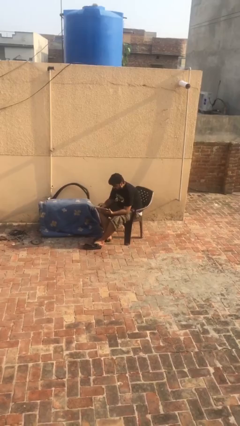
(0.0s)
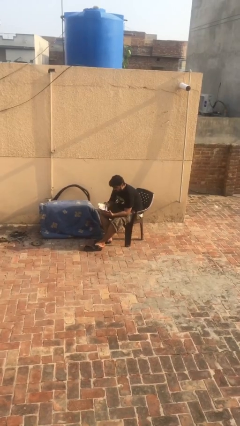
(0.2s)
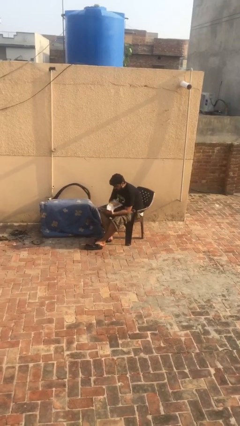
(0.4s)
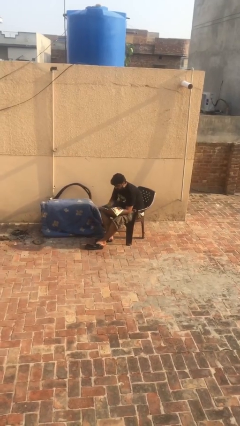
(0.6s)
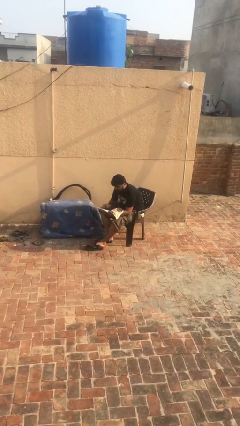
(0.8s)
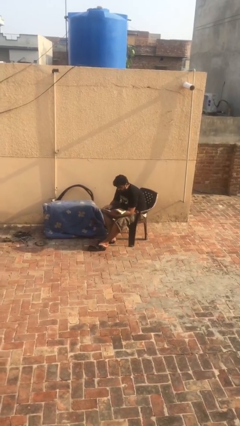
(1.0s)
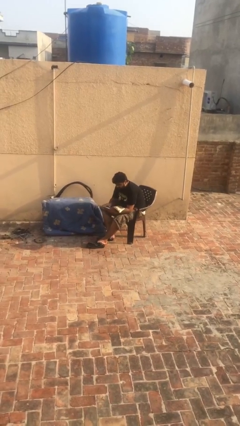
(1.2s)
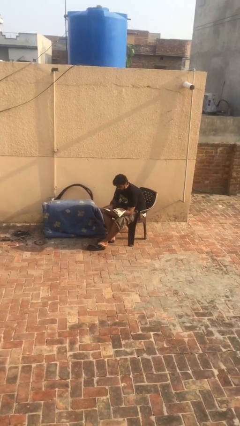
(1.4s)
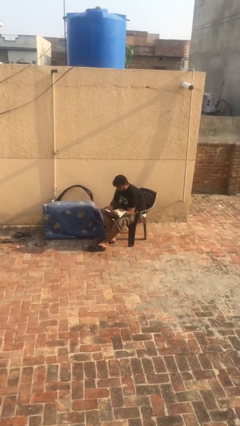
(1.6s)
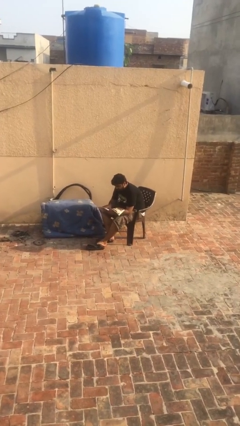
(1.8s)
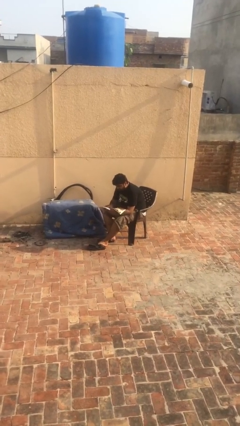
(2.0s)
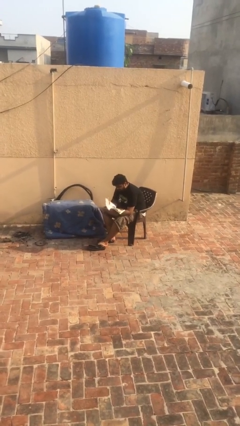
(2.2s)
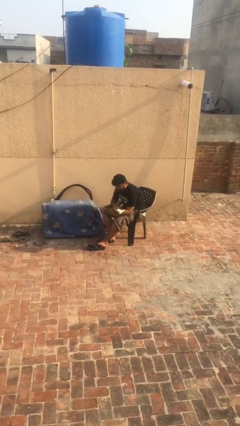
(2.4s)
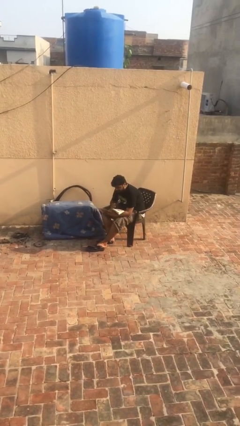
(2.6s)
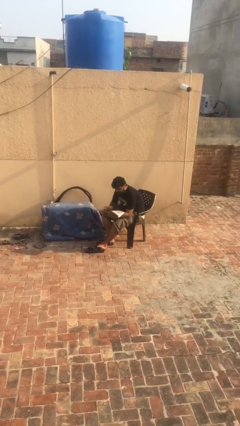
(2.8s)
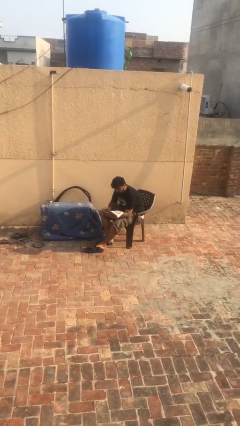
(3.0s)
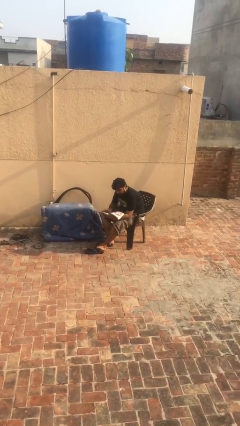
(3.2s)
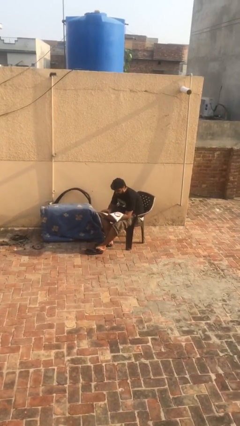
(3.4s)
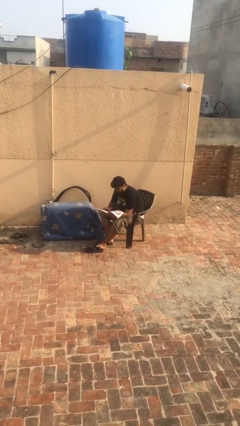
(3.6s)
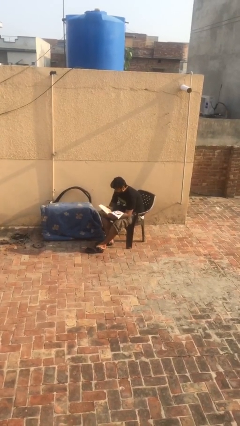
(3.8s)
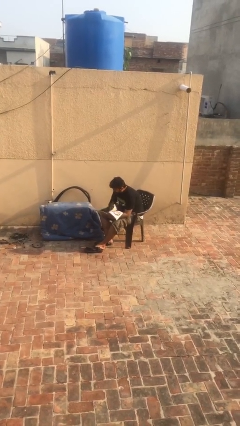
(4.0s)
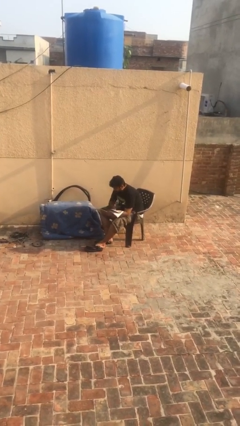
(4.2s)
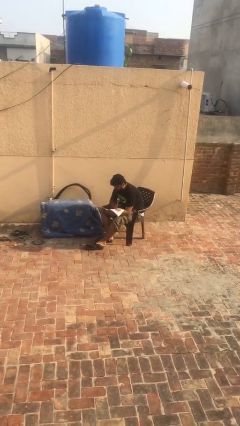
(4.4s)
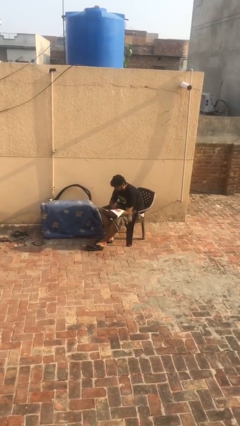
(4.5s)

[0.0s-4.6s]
person reads document

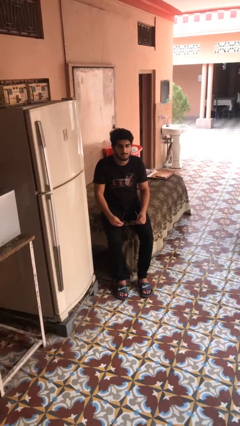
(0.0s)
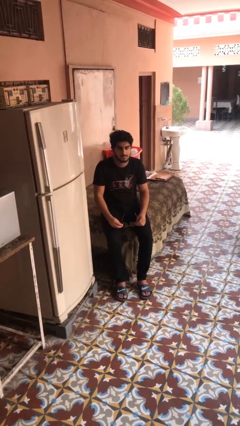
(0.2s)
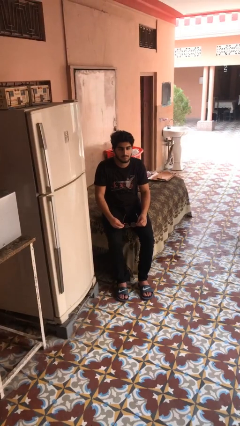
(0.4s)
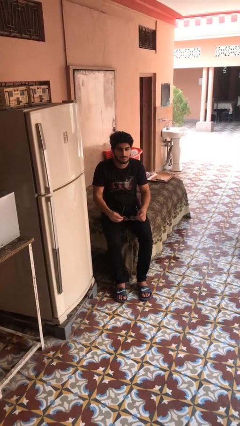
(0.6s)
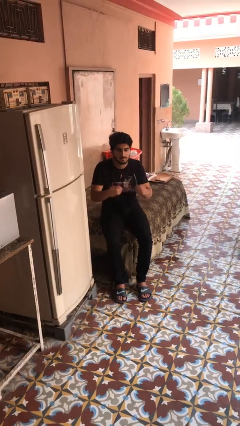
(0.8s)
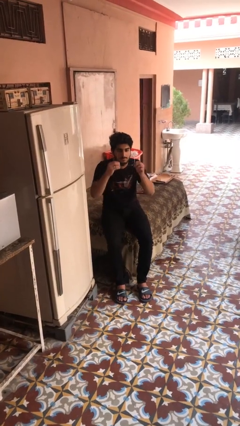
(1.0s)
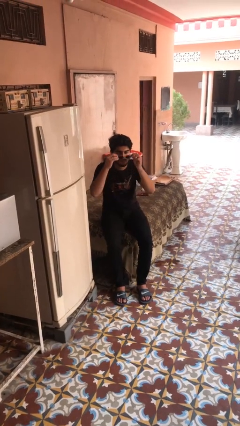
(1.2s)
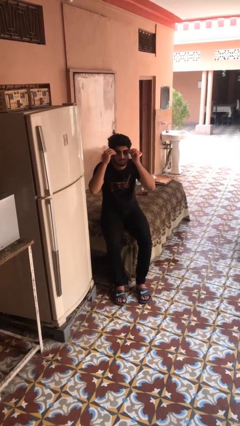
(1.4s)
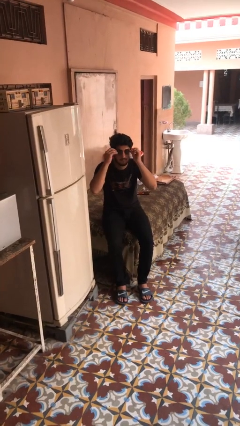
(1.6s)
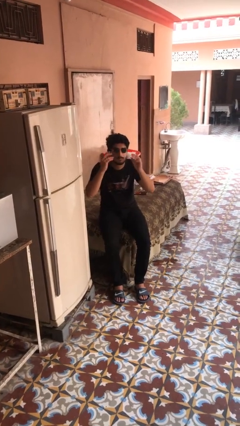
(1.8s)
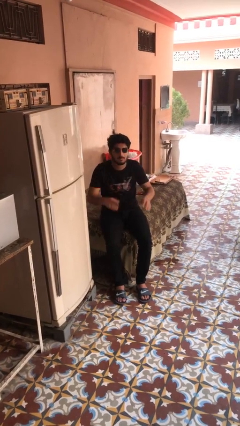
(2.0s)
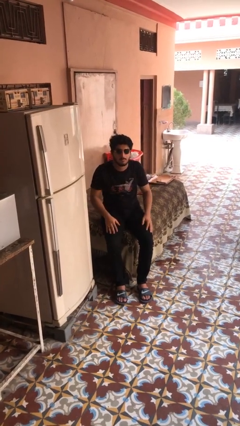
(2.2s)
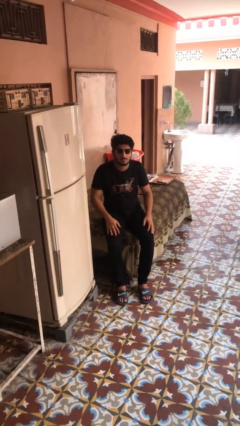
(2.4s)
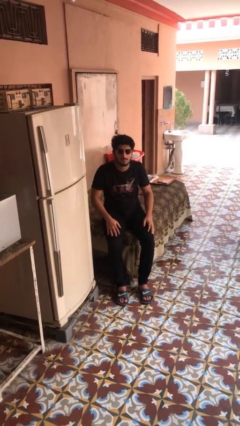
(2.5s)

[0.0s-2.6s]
person puts on sunglasses

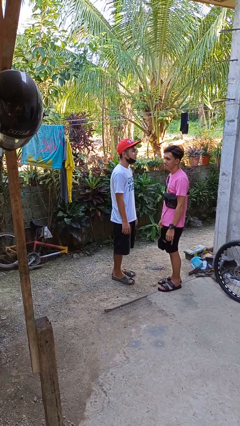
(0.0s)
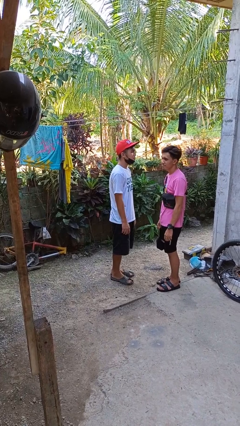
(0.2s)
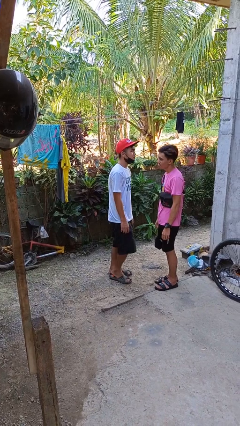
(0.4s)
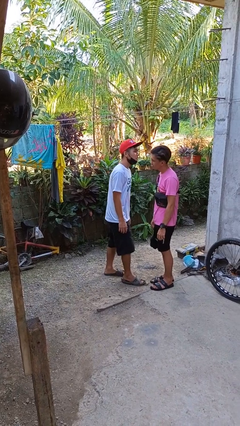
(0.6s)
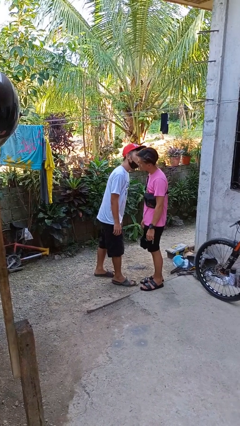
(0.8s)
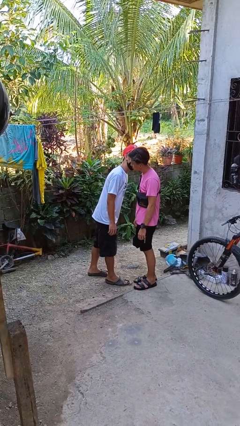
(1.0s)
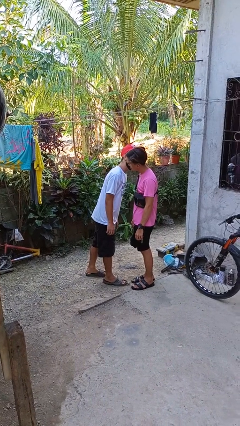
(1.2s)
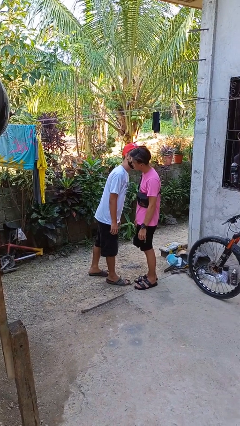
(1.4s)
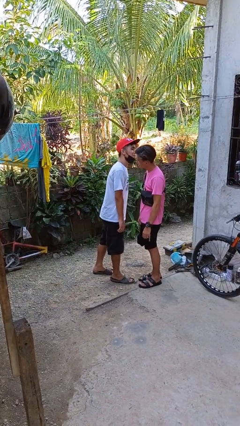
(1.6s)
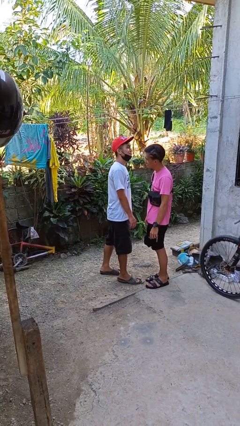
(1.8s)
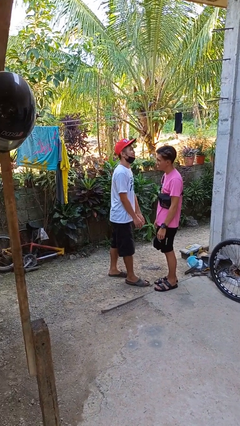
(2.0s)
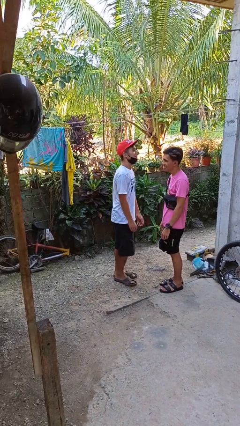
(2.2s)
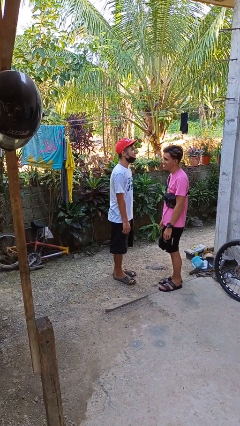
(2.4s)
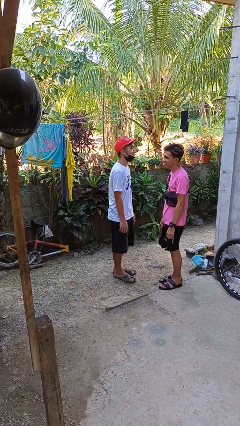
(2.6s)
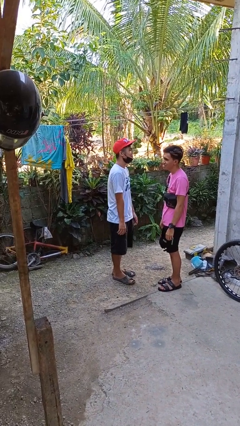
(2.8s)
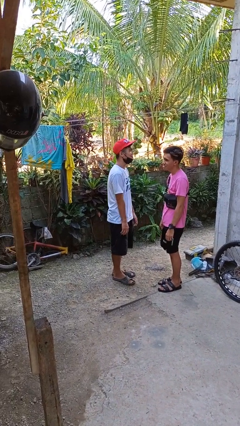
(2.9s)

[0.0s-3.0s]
person kisses cheek of person

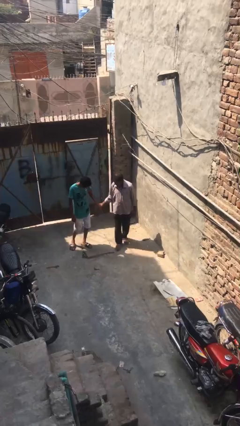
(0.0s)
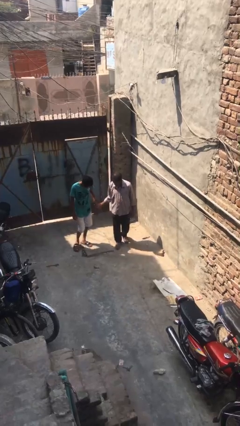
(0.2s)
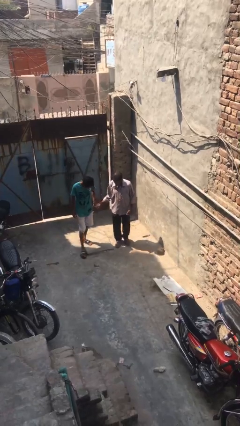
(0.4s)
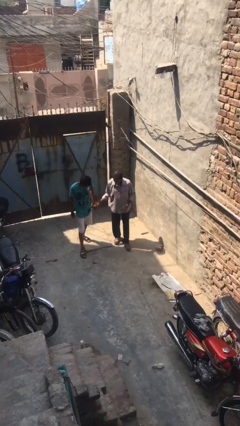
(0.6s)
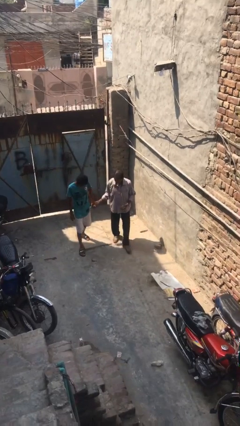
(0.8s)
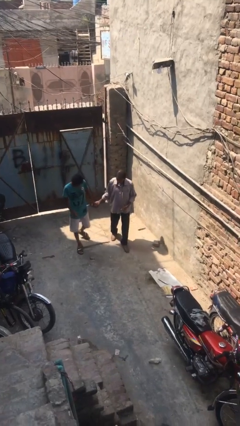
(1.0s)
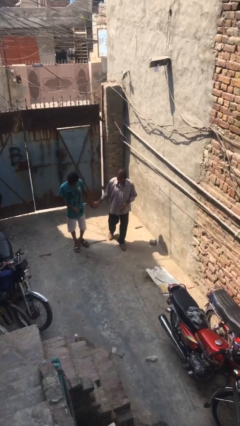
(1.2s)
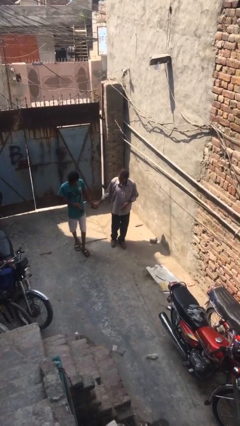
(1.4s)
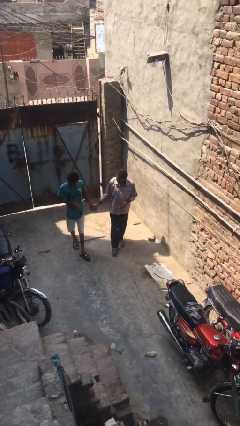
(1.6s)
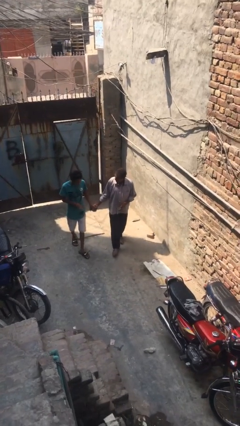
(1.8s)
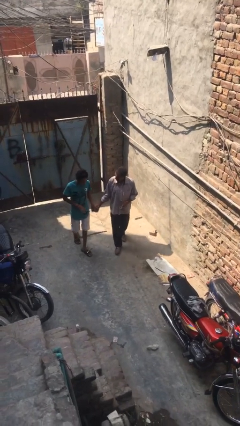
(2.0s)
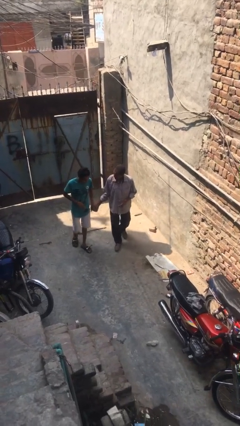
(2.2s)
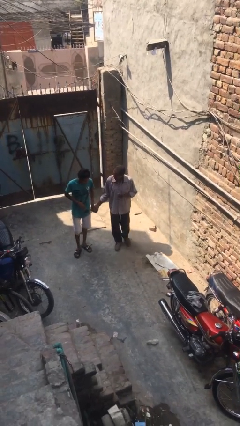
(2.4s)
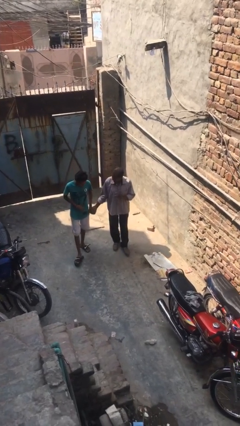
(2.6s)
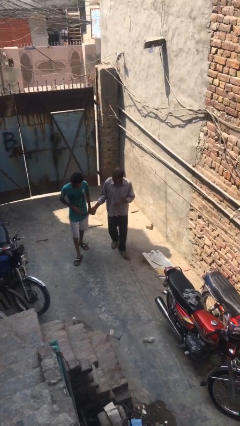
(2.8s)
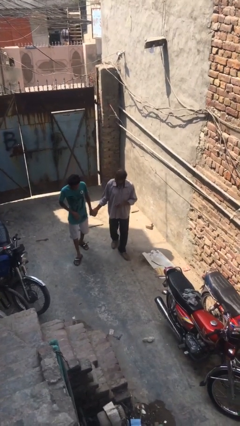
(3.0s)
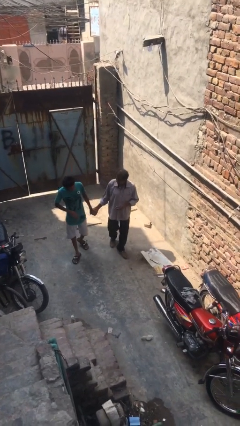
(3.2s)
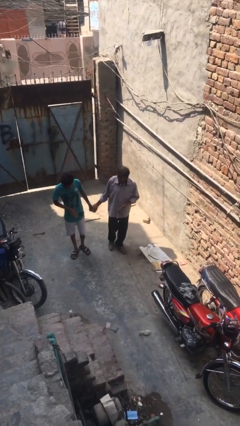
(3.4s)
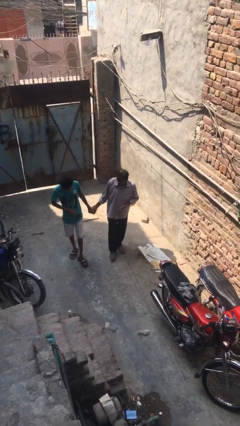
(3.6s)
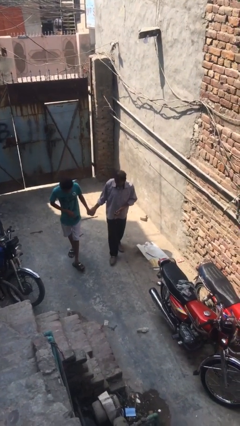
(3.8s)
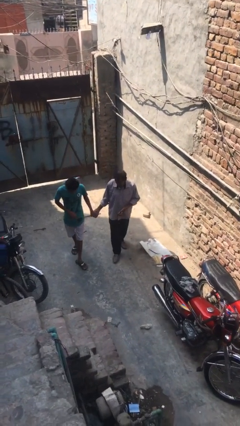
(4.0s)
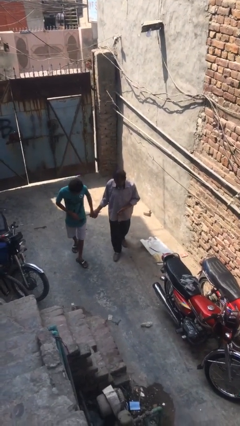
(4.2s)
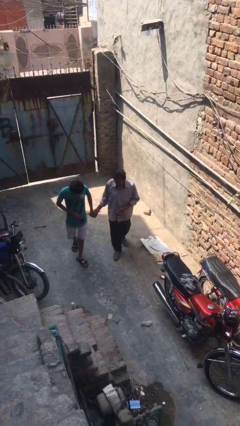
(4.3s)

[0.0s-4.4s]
person holds hand

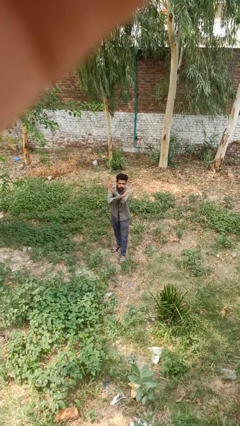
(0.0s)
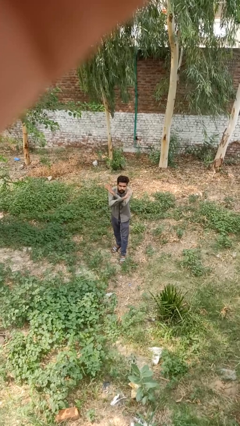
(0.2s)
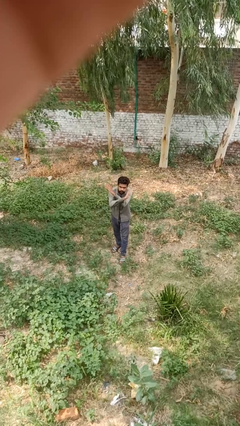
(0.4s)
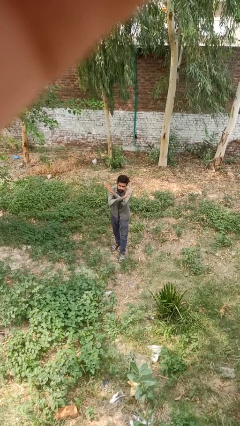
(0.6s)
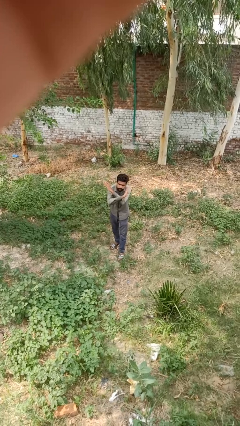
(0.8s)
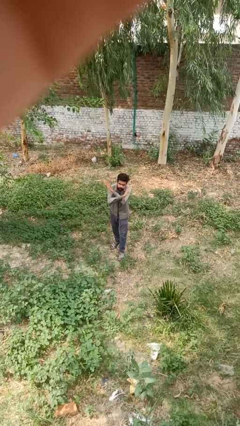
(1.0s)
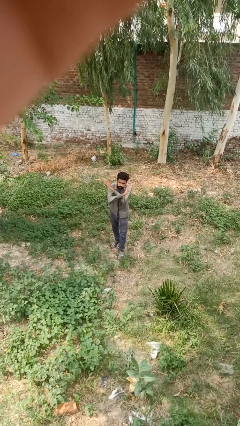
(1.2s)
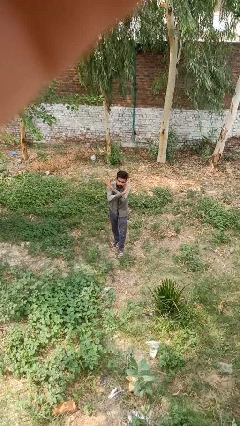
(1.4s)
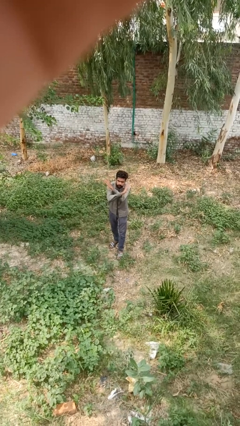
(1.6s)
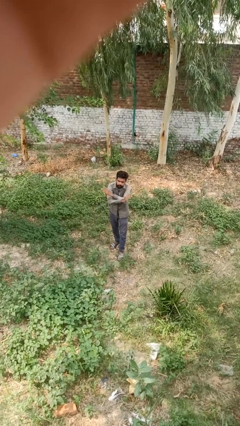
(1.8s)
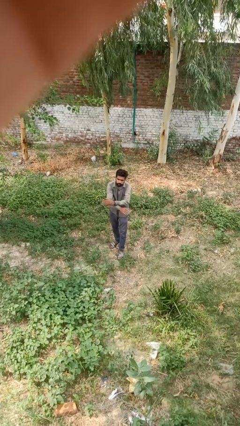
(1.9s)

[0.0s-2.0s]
person crosses arms

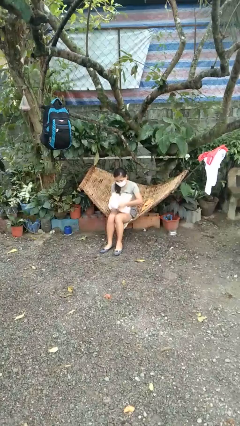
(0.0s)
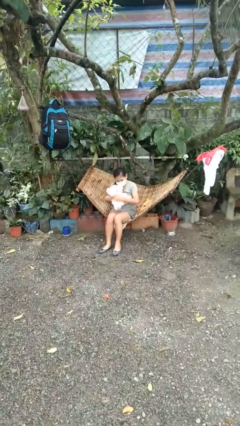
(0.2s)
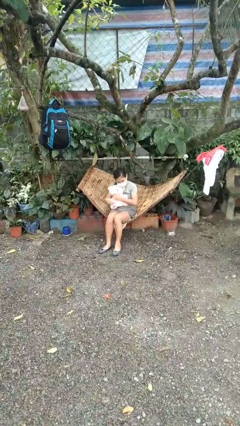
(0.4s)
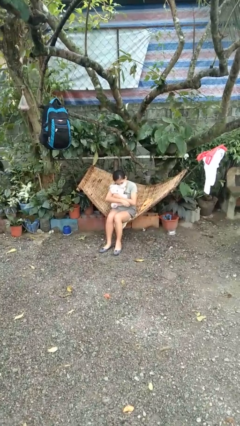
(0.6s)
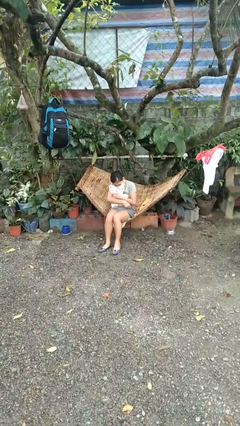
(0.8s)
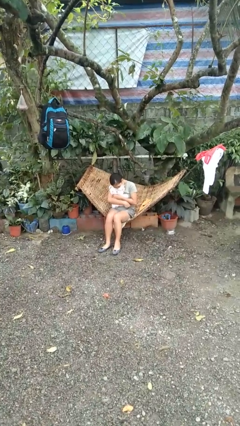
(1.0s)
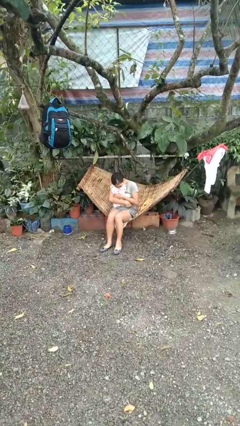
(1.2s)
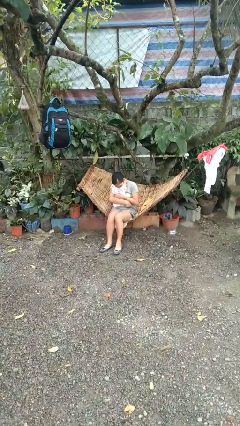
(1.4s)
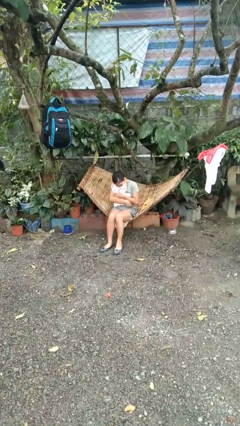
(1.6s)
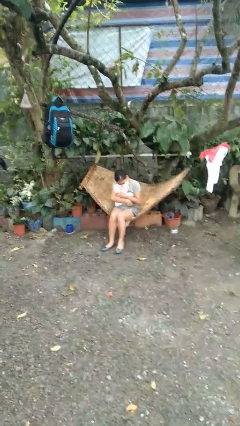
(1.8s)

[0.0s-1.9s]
person hugs stuffed animal
